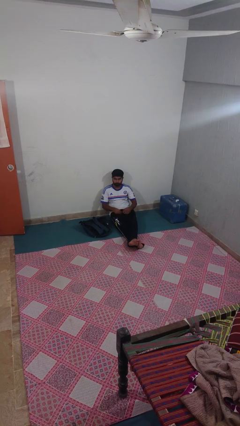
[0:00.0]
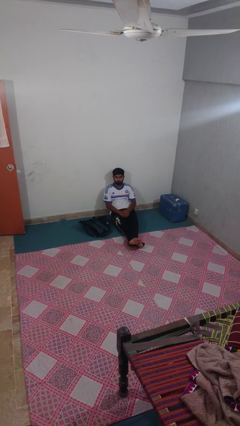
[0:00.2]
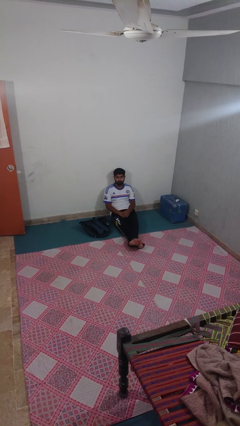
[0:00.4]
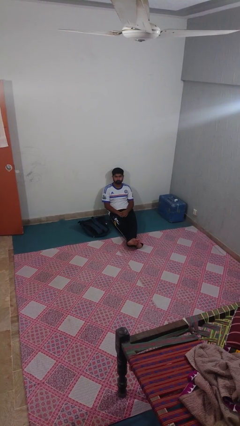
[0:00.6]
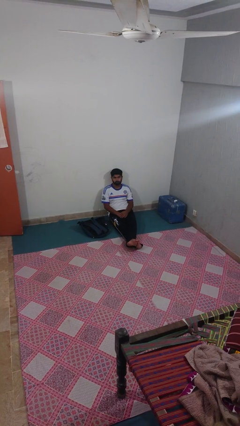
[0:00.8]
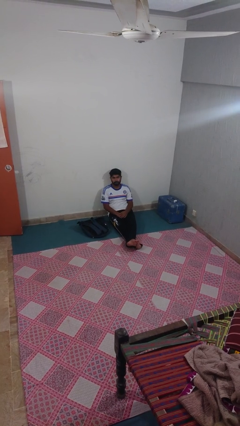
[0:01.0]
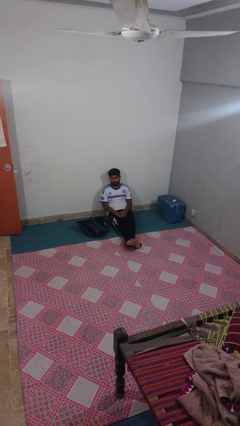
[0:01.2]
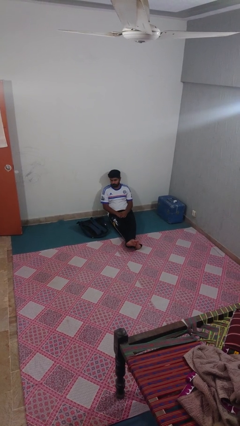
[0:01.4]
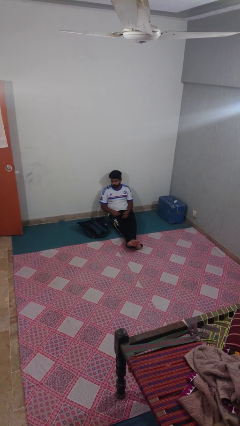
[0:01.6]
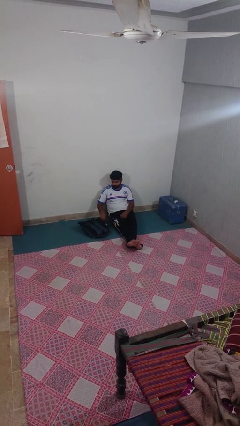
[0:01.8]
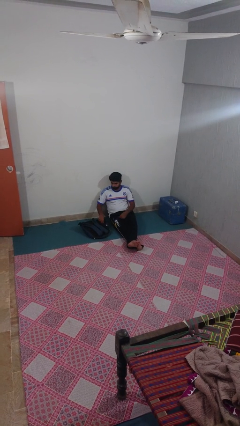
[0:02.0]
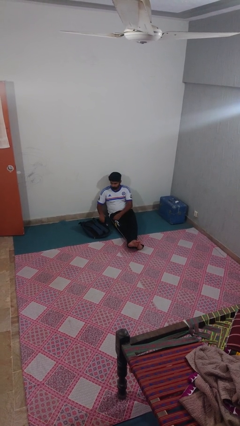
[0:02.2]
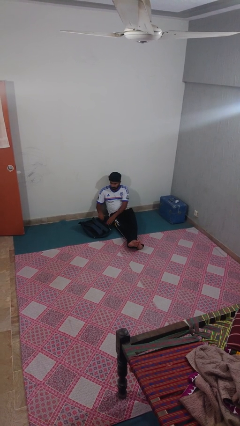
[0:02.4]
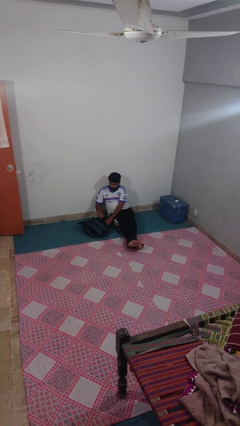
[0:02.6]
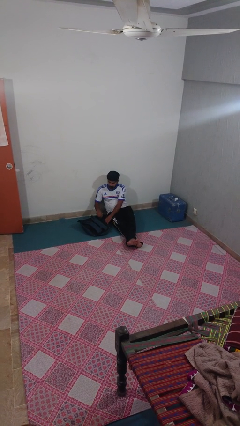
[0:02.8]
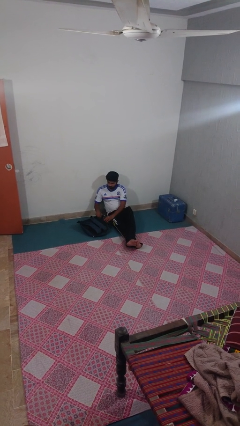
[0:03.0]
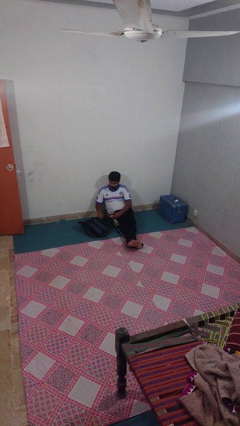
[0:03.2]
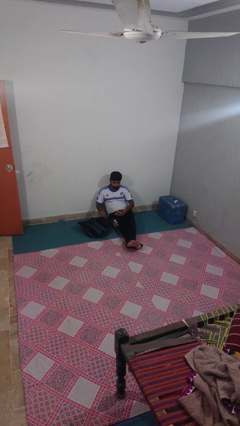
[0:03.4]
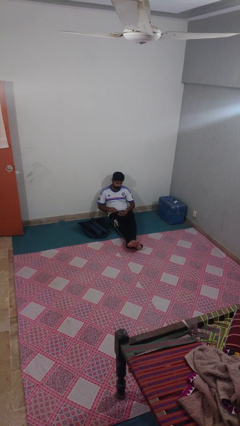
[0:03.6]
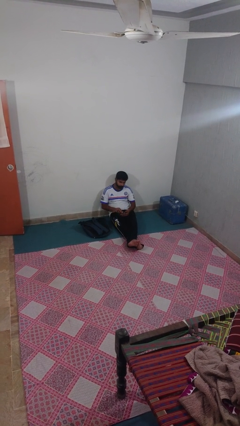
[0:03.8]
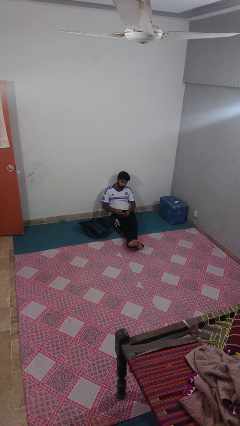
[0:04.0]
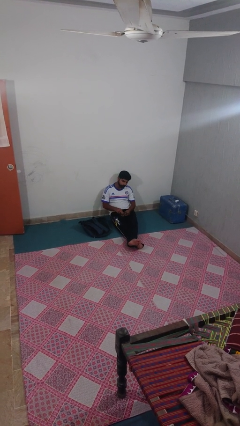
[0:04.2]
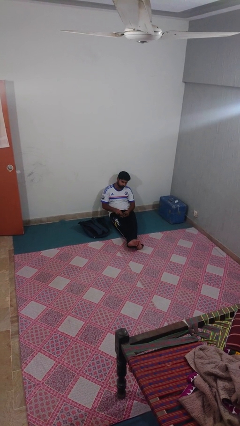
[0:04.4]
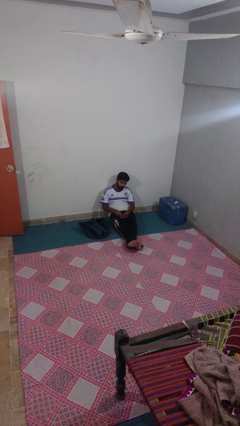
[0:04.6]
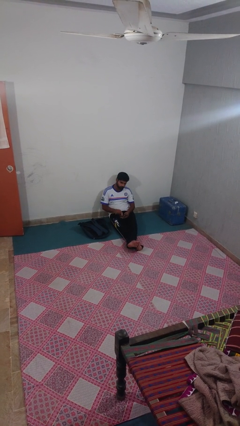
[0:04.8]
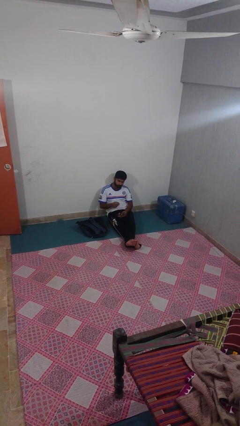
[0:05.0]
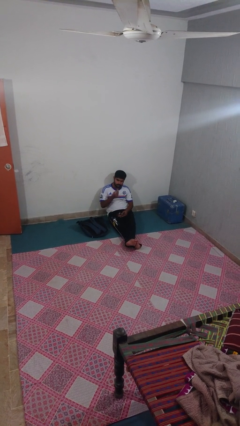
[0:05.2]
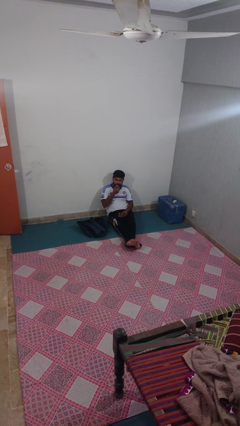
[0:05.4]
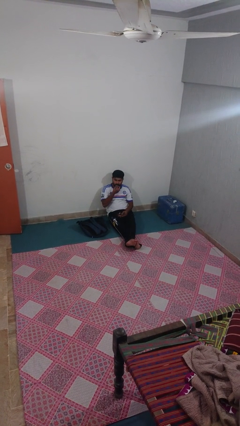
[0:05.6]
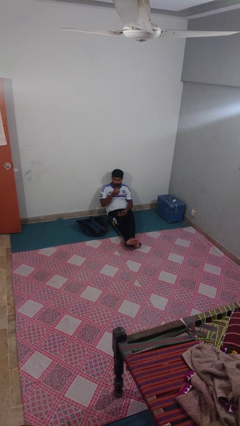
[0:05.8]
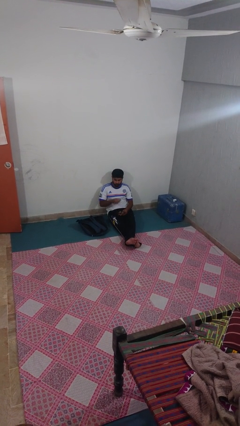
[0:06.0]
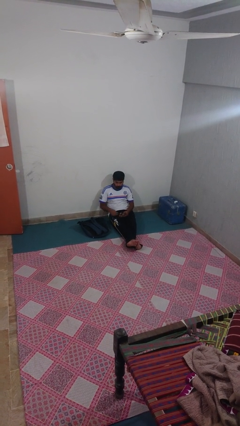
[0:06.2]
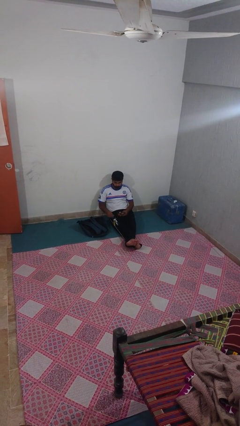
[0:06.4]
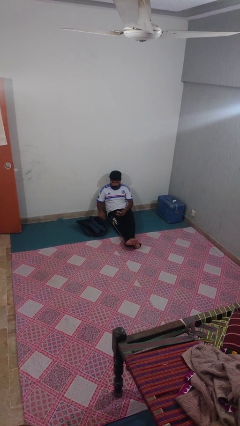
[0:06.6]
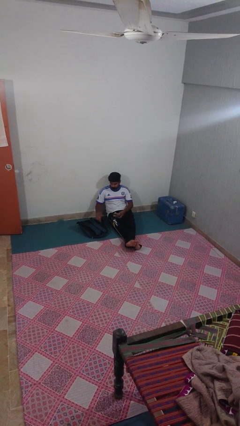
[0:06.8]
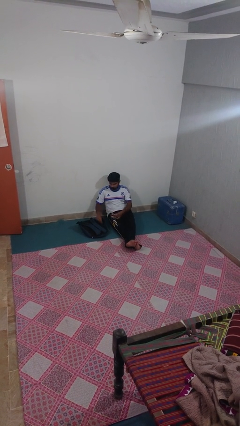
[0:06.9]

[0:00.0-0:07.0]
person eats snack from bag

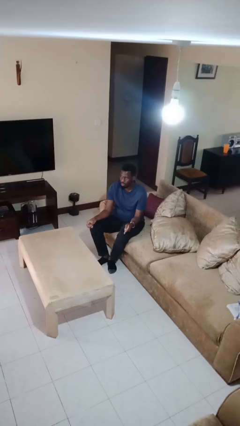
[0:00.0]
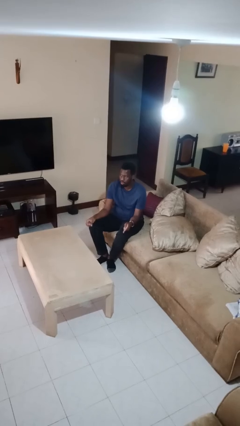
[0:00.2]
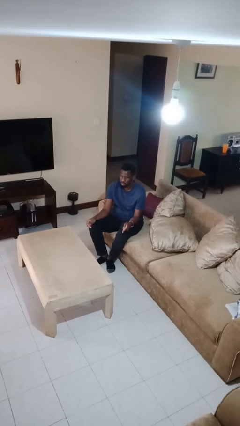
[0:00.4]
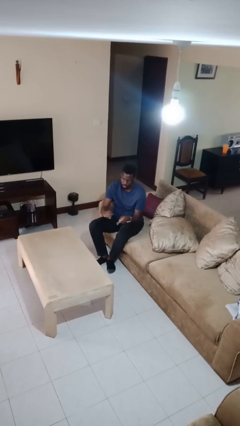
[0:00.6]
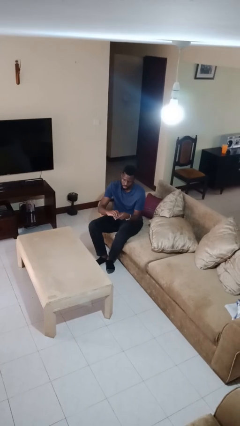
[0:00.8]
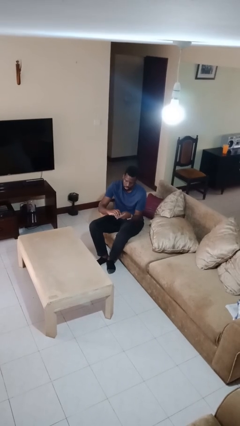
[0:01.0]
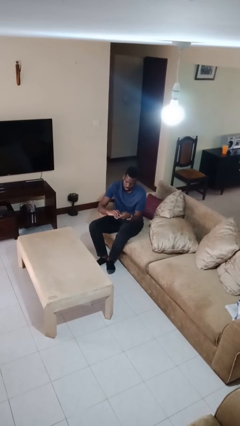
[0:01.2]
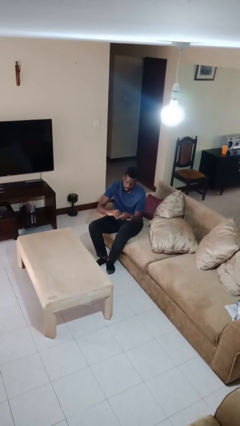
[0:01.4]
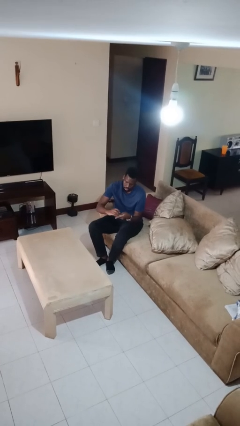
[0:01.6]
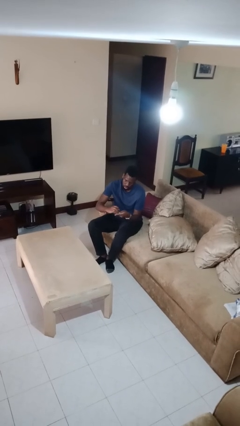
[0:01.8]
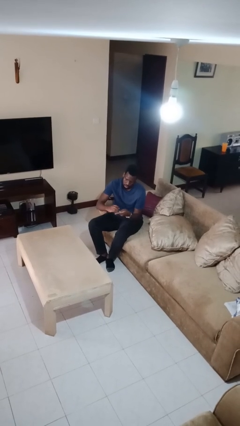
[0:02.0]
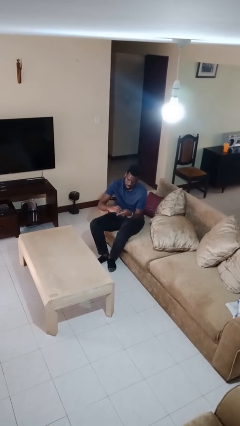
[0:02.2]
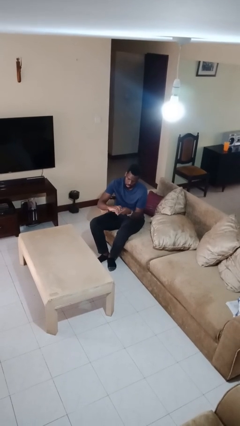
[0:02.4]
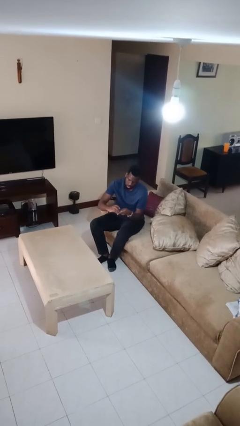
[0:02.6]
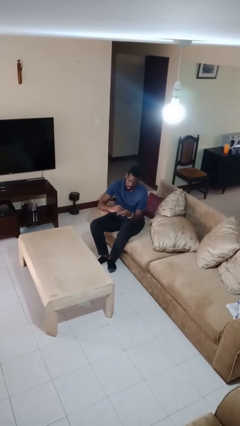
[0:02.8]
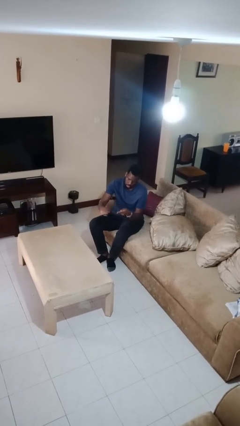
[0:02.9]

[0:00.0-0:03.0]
person files fingernails

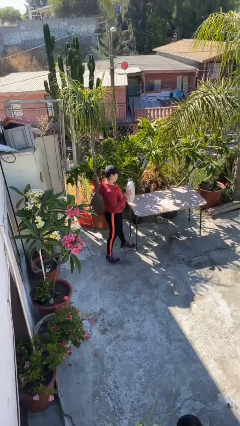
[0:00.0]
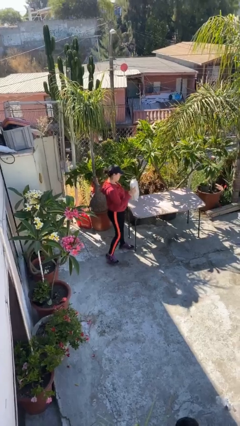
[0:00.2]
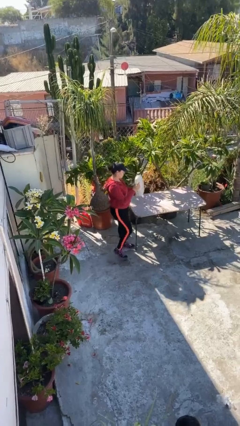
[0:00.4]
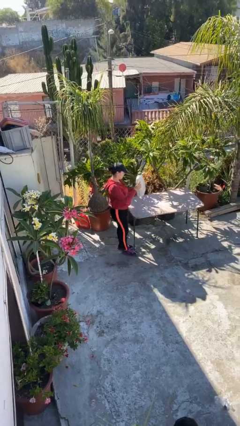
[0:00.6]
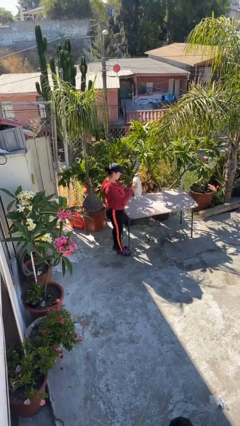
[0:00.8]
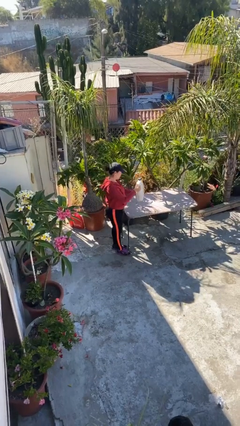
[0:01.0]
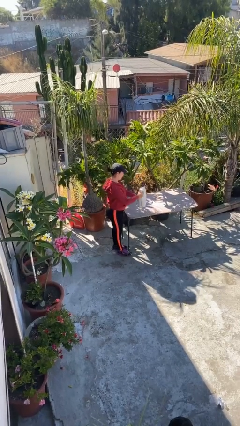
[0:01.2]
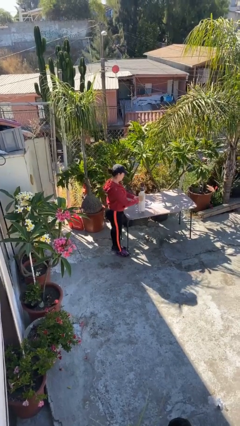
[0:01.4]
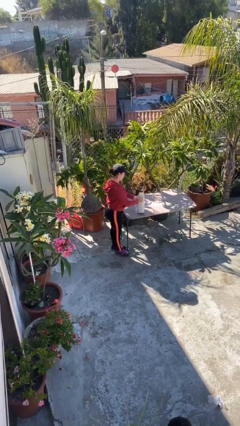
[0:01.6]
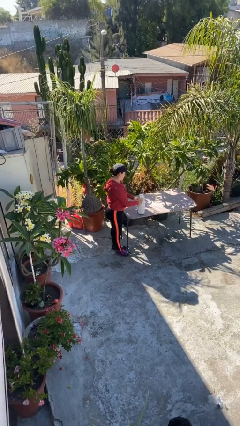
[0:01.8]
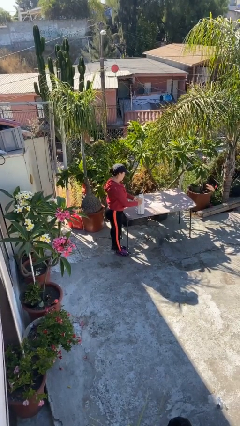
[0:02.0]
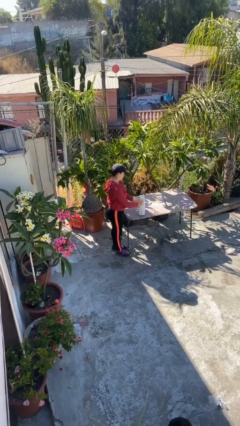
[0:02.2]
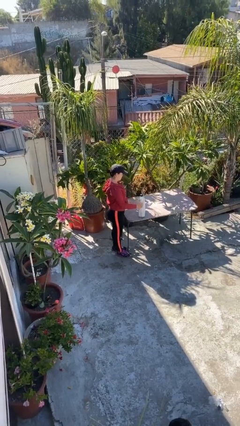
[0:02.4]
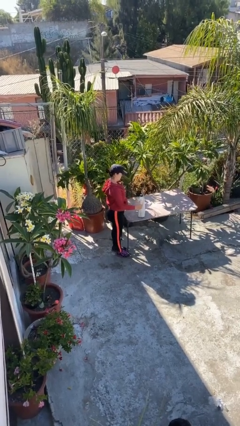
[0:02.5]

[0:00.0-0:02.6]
person puts down object on table

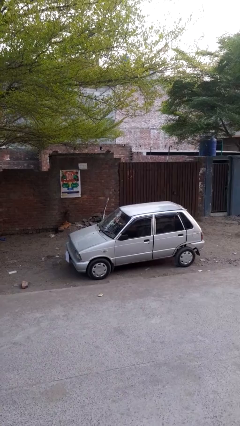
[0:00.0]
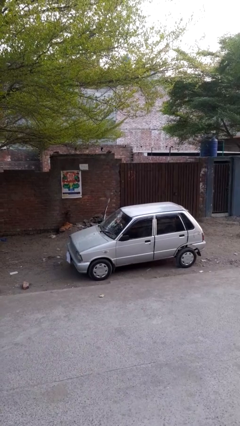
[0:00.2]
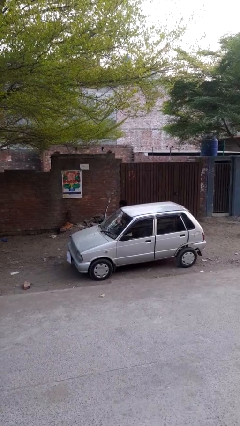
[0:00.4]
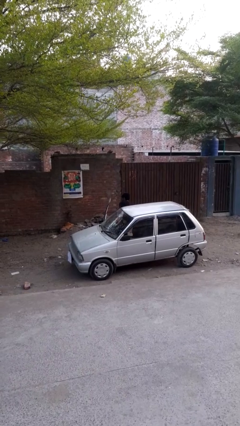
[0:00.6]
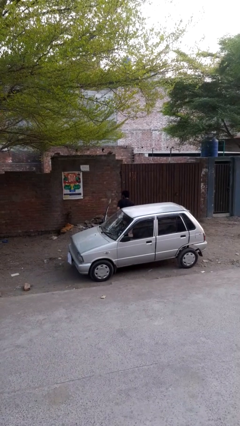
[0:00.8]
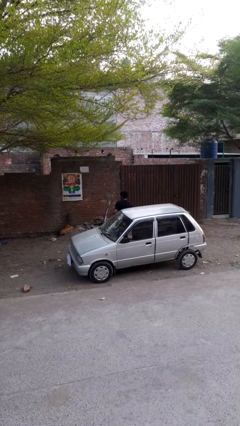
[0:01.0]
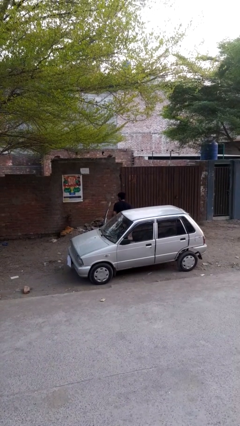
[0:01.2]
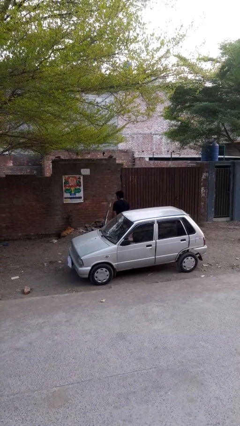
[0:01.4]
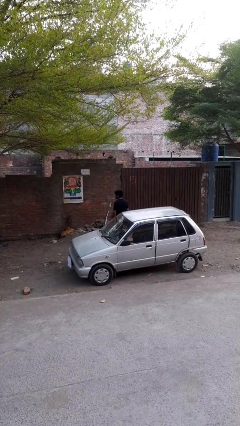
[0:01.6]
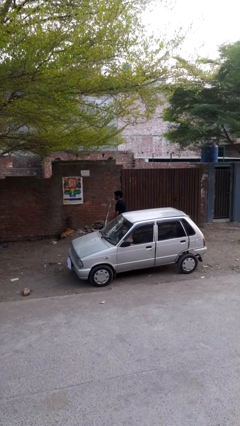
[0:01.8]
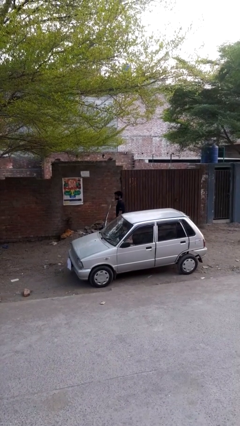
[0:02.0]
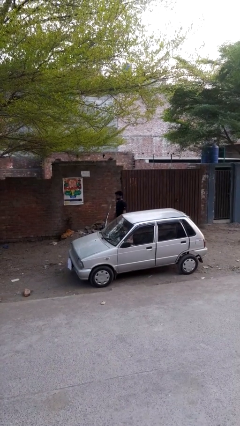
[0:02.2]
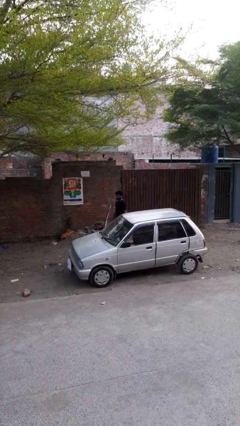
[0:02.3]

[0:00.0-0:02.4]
person exits car

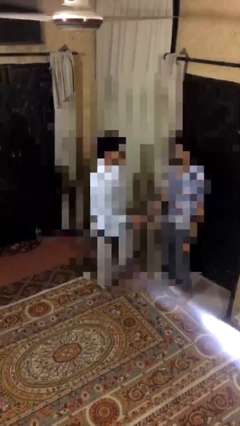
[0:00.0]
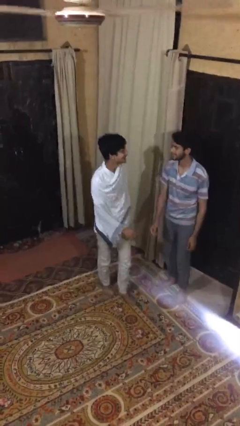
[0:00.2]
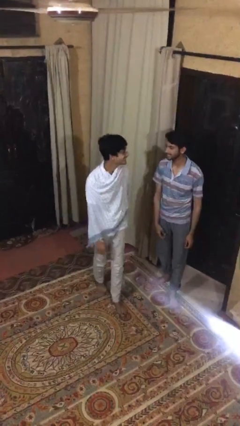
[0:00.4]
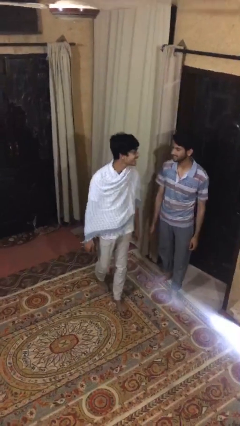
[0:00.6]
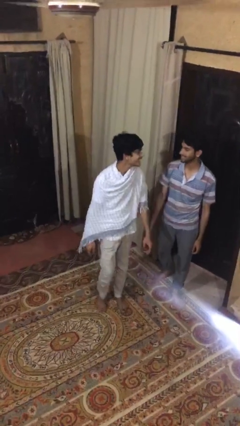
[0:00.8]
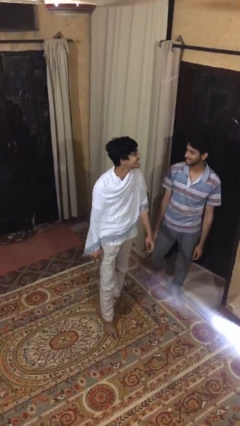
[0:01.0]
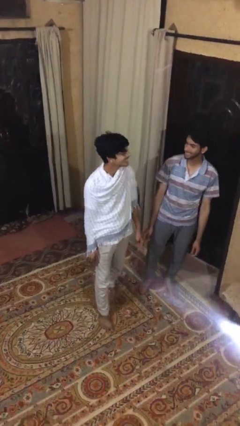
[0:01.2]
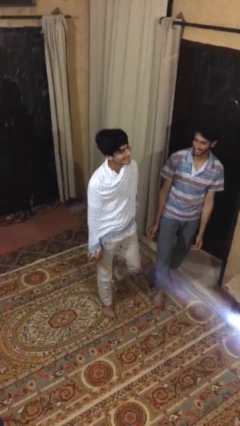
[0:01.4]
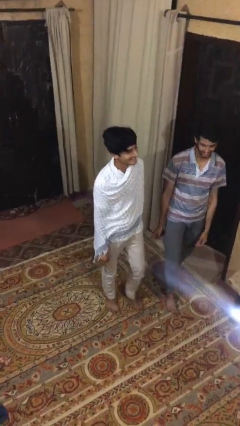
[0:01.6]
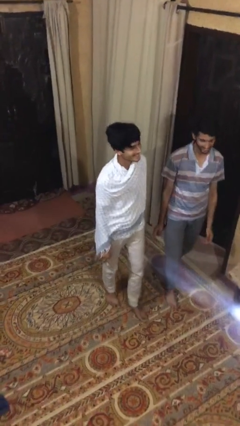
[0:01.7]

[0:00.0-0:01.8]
person talks to person

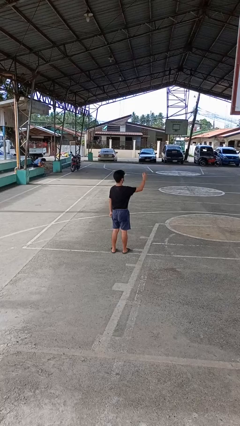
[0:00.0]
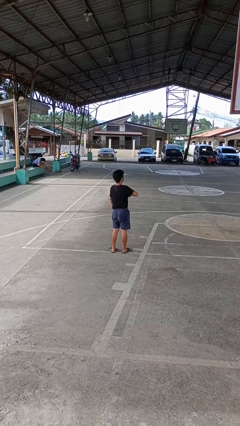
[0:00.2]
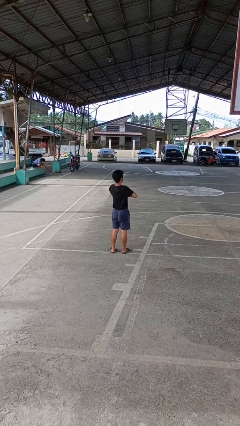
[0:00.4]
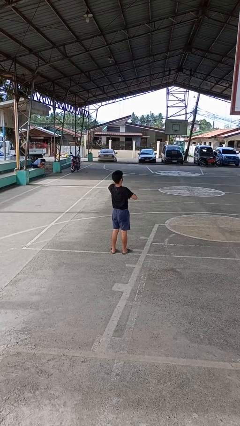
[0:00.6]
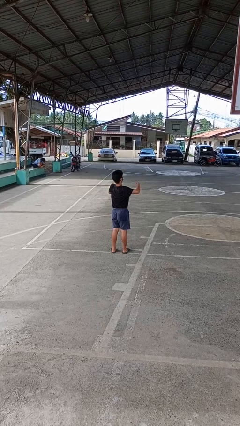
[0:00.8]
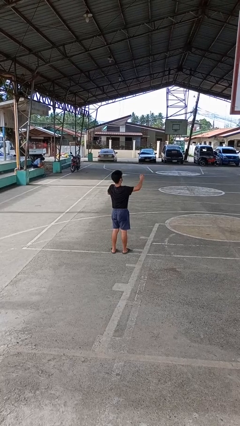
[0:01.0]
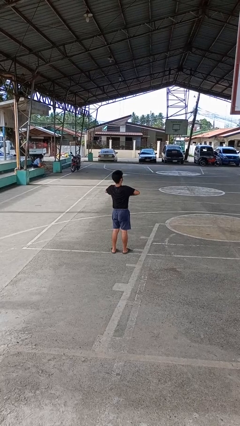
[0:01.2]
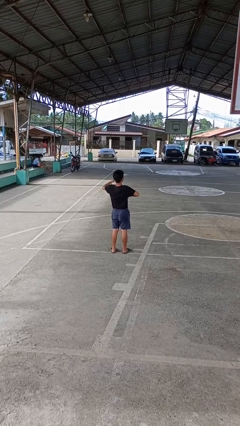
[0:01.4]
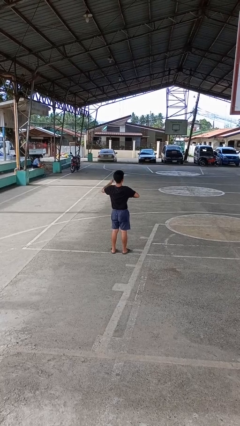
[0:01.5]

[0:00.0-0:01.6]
person drums on chest
